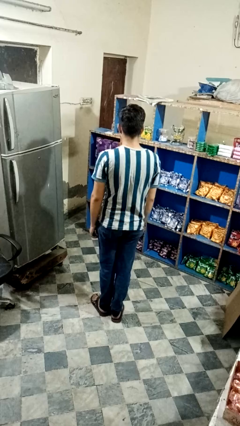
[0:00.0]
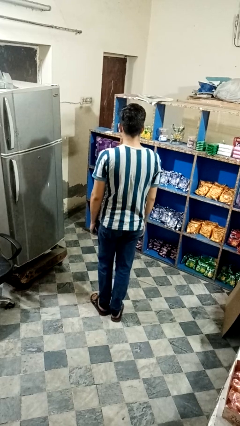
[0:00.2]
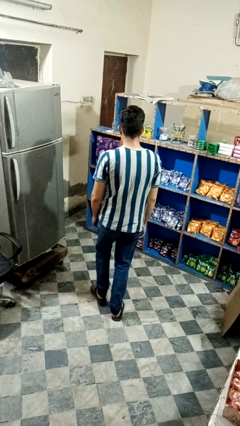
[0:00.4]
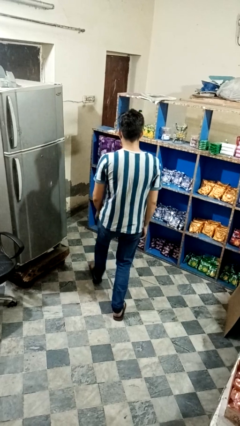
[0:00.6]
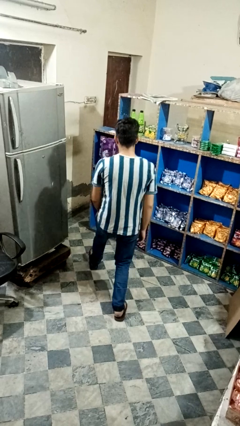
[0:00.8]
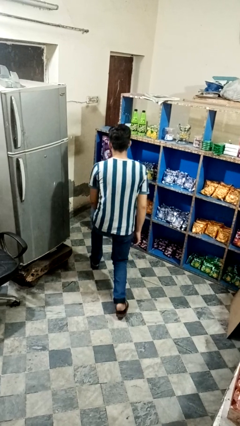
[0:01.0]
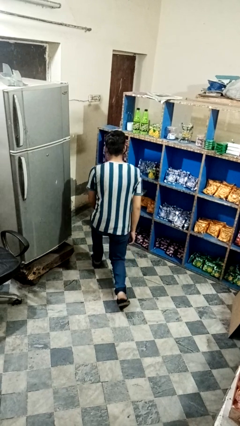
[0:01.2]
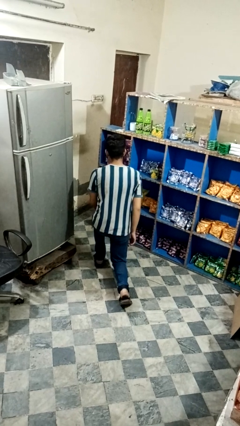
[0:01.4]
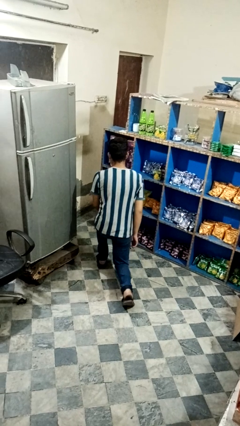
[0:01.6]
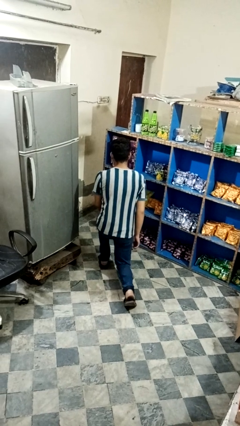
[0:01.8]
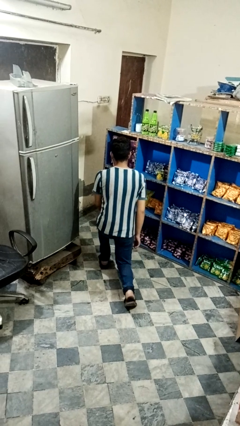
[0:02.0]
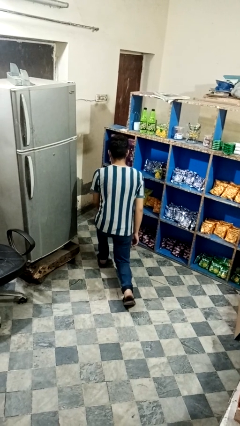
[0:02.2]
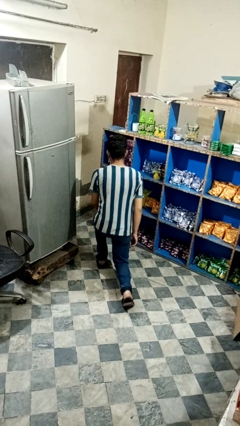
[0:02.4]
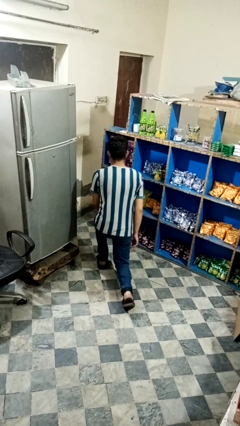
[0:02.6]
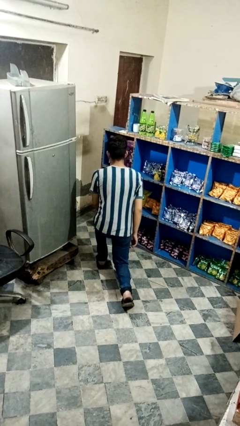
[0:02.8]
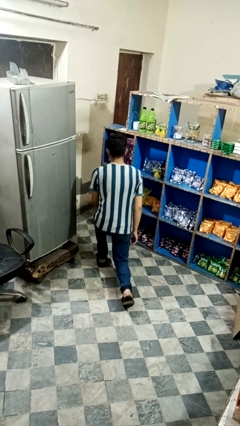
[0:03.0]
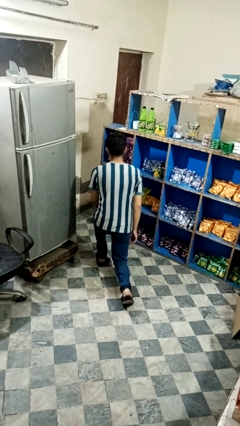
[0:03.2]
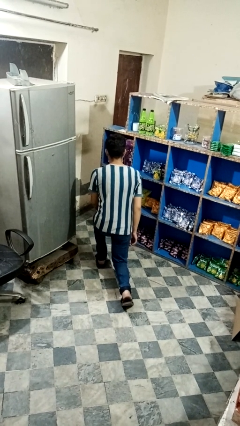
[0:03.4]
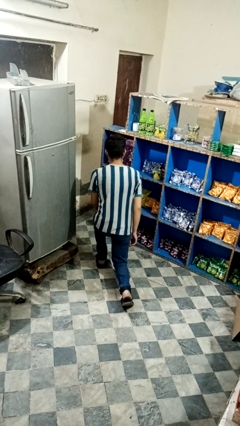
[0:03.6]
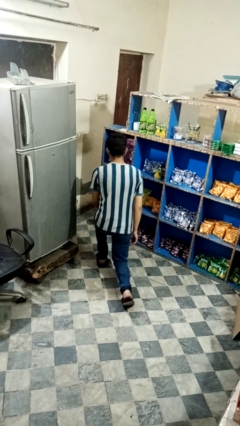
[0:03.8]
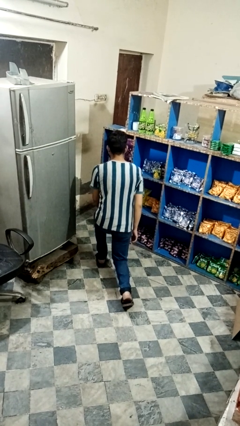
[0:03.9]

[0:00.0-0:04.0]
person exercises with lunges

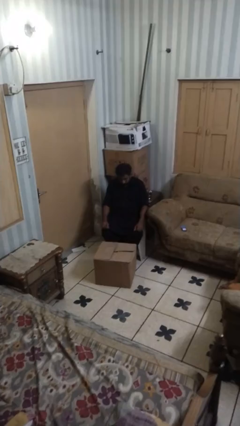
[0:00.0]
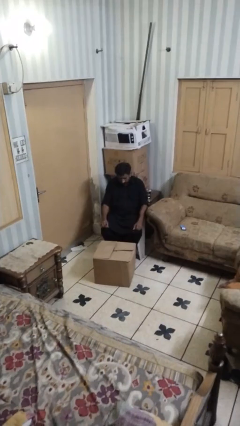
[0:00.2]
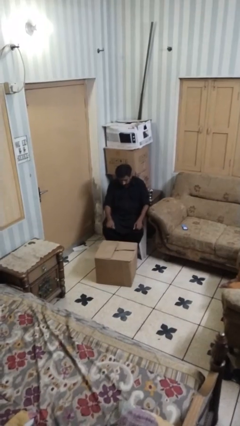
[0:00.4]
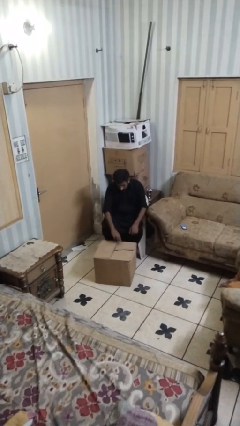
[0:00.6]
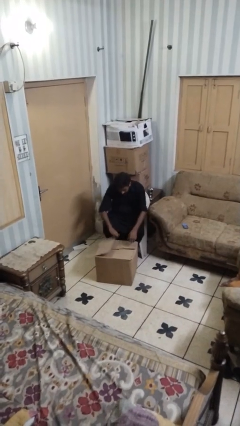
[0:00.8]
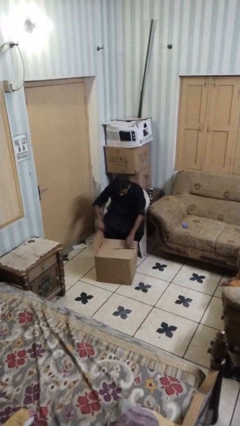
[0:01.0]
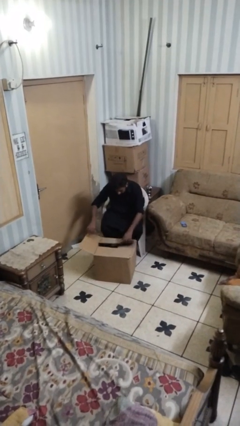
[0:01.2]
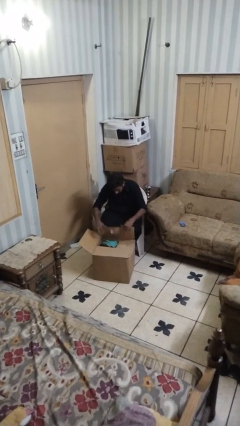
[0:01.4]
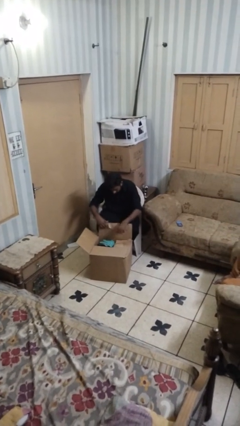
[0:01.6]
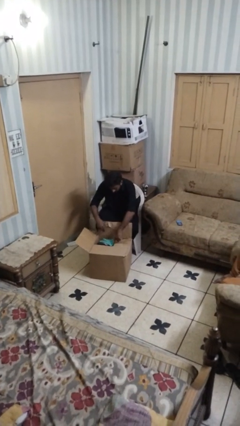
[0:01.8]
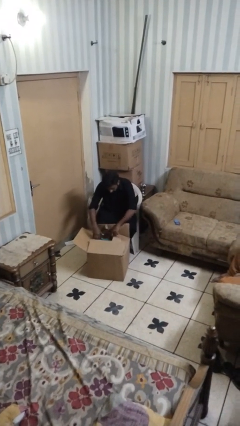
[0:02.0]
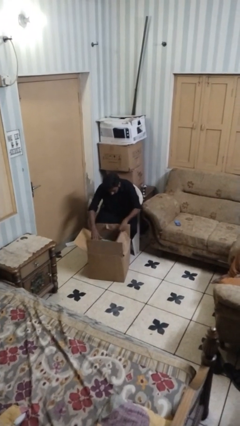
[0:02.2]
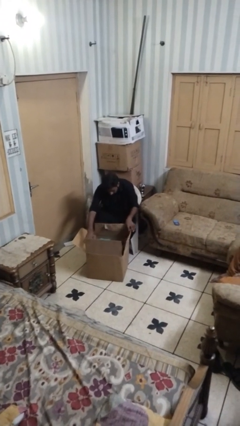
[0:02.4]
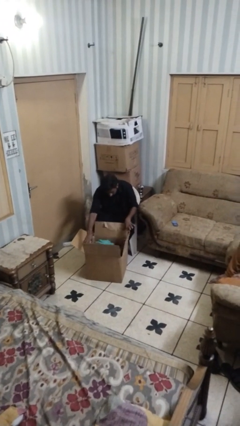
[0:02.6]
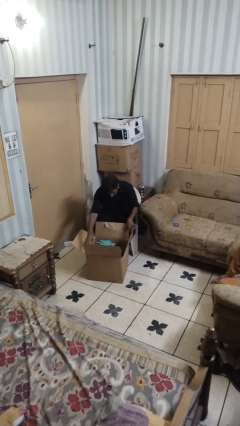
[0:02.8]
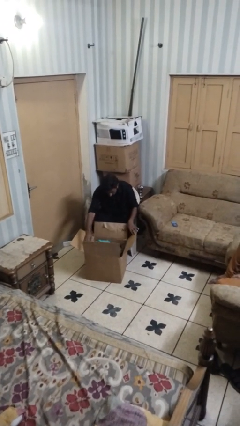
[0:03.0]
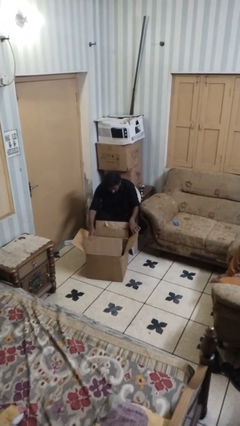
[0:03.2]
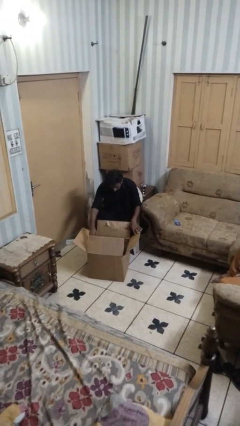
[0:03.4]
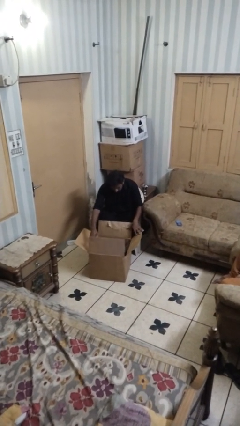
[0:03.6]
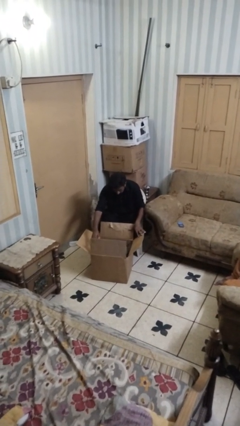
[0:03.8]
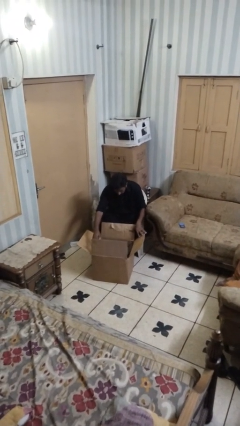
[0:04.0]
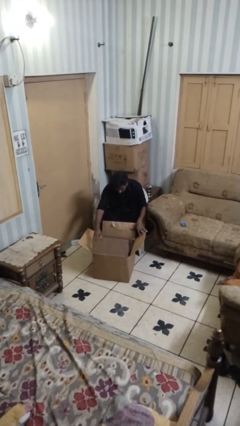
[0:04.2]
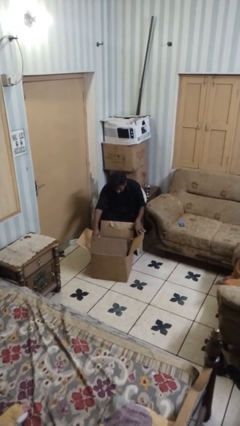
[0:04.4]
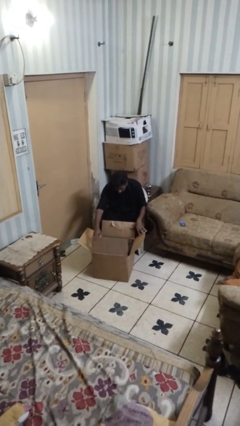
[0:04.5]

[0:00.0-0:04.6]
person opens box

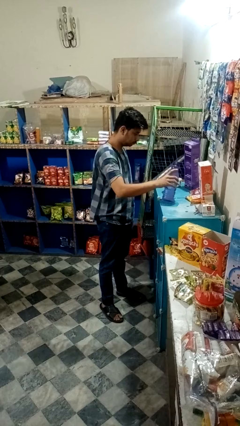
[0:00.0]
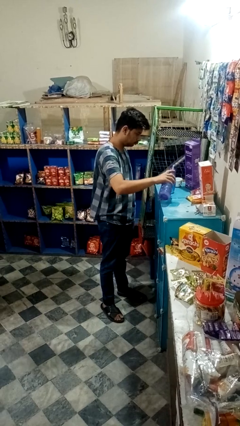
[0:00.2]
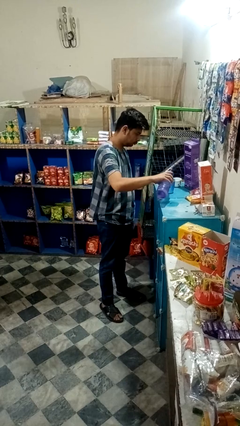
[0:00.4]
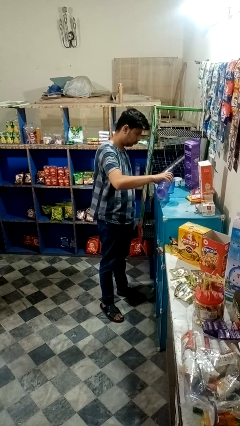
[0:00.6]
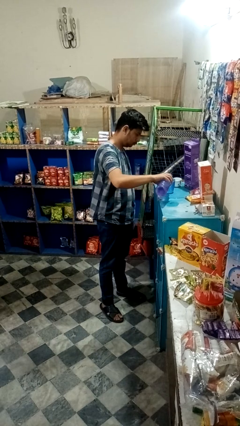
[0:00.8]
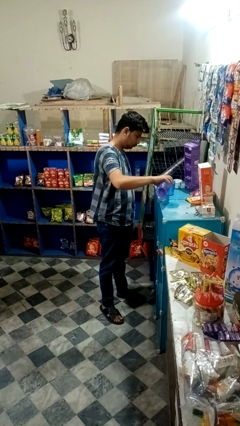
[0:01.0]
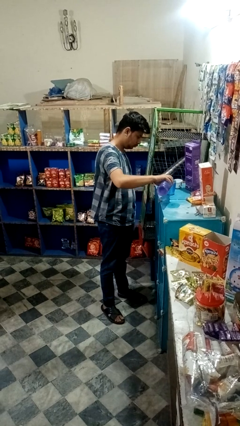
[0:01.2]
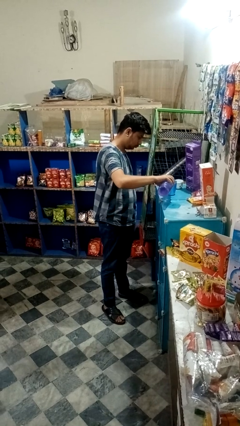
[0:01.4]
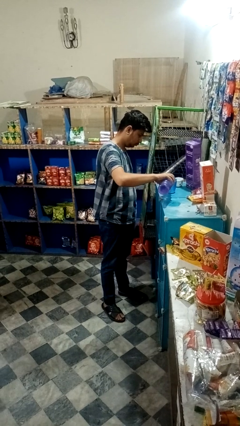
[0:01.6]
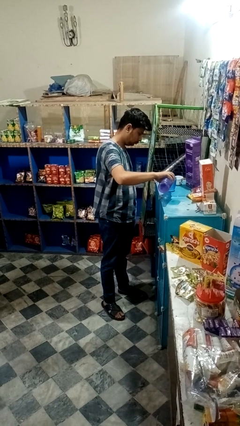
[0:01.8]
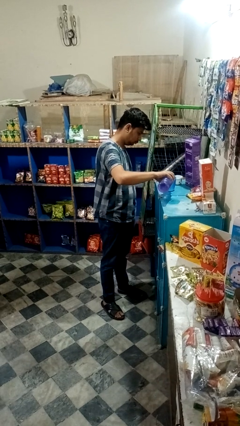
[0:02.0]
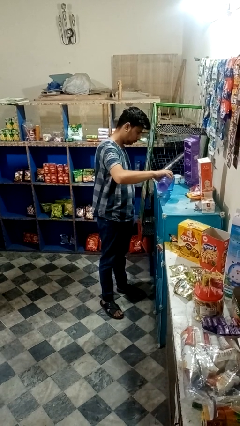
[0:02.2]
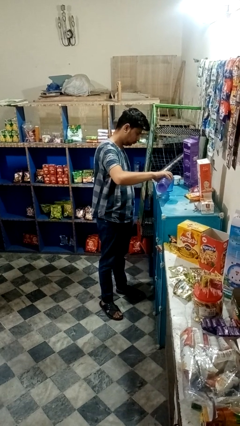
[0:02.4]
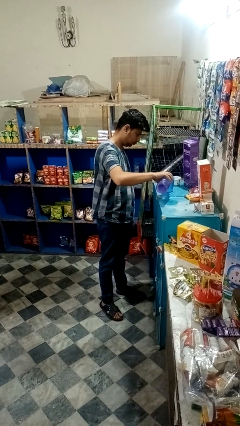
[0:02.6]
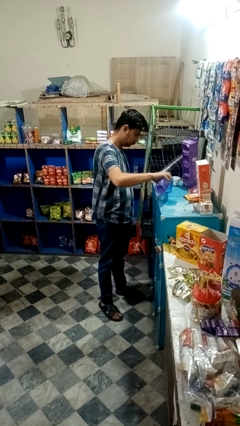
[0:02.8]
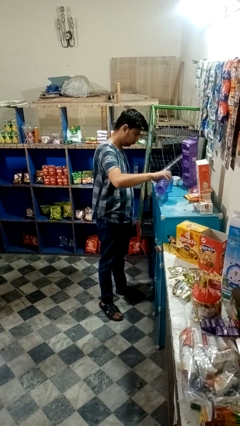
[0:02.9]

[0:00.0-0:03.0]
person pours liquid into cup

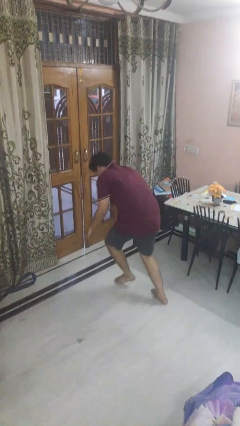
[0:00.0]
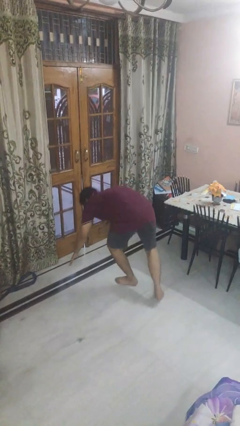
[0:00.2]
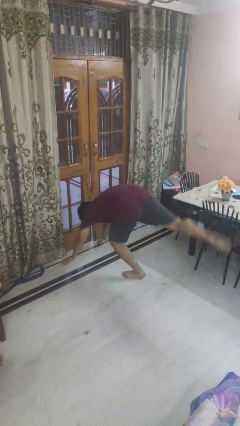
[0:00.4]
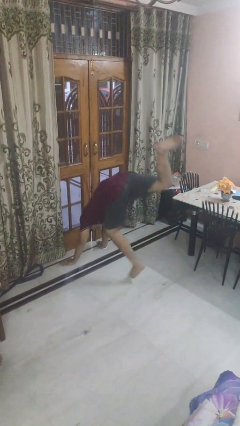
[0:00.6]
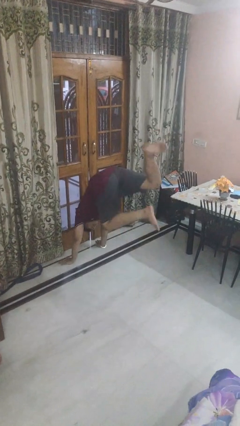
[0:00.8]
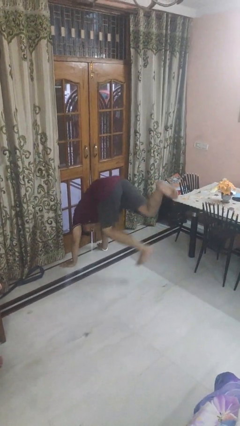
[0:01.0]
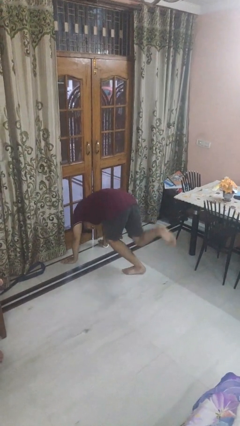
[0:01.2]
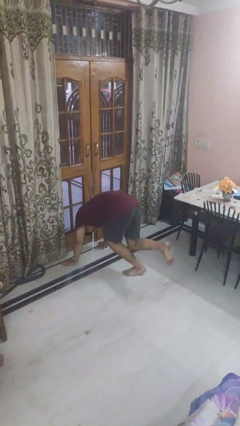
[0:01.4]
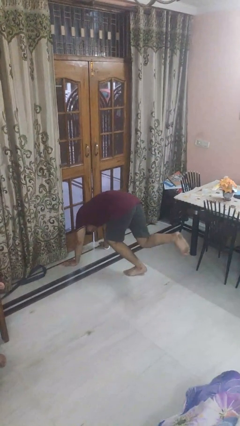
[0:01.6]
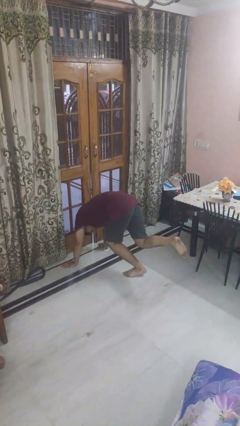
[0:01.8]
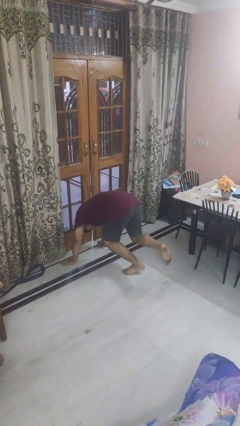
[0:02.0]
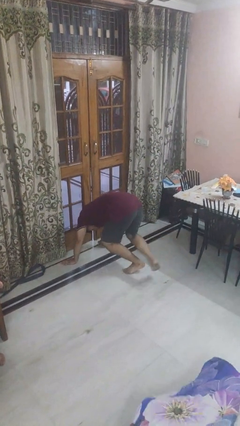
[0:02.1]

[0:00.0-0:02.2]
person handstand

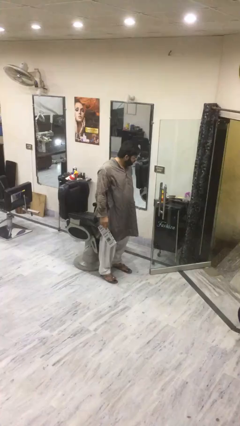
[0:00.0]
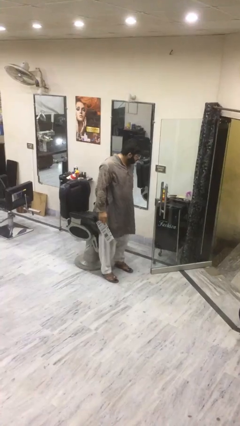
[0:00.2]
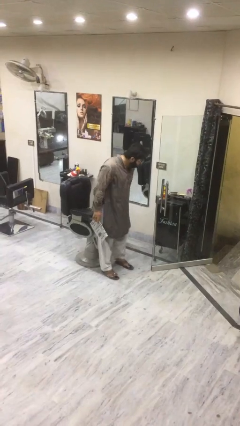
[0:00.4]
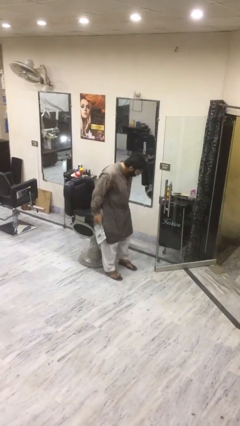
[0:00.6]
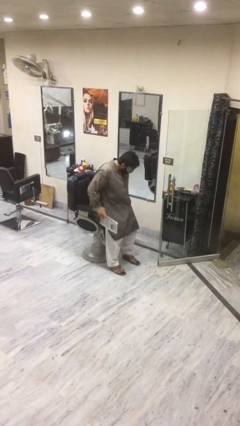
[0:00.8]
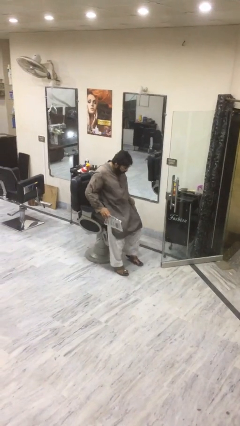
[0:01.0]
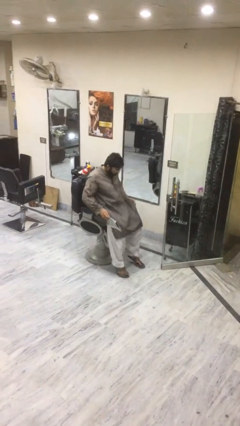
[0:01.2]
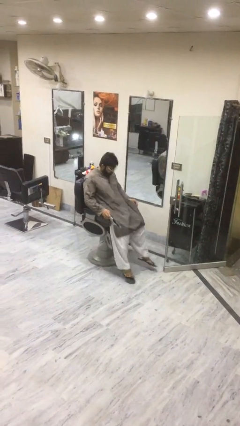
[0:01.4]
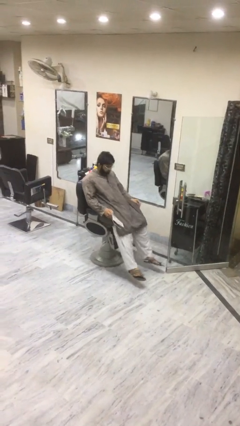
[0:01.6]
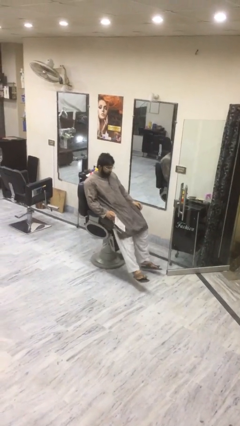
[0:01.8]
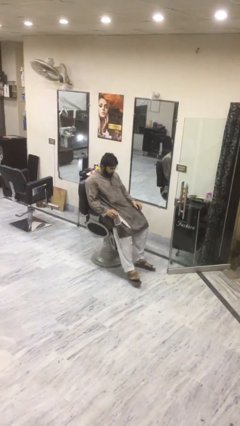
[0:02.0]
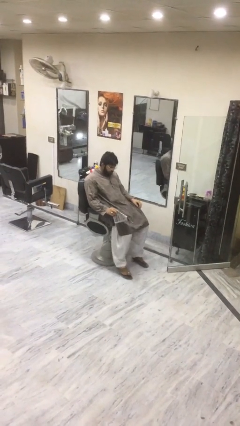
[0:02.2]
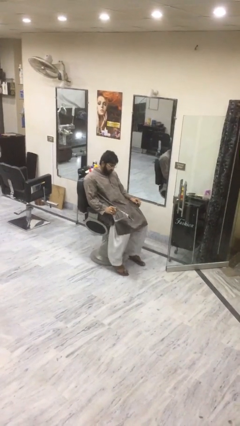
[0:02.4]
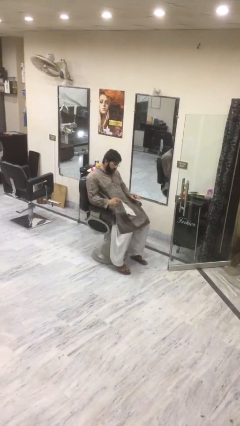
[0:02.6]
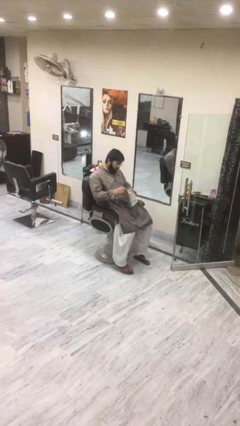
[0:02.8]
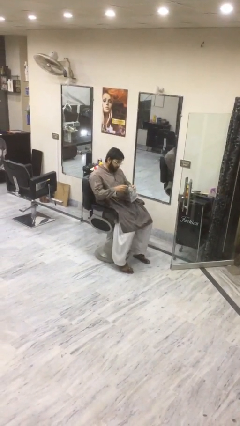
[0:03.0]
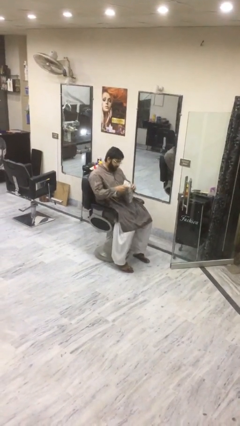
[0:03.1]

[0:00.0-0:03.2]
person sits down

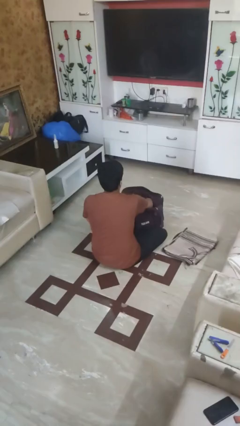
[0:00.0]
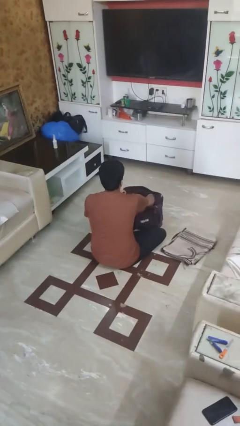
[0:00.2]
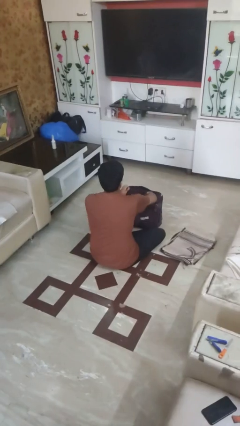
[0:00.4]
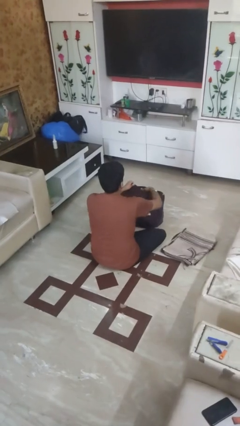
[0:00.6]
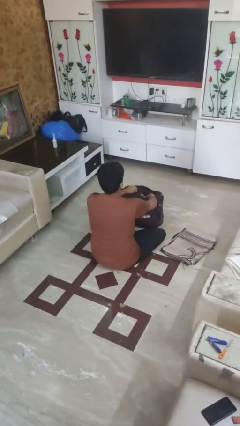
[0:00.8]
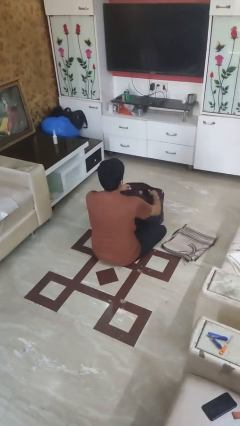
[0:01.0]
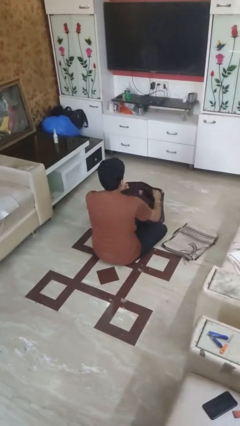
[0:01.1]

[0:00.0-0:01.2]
person loads clothes into suitcase
